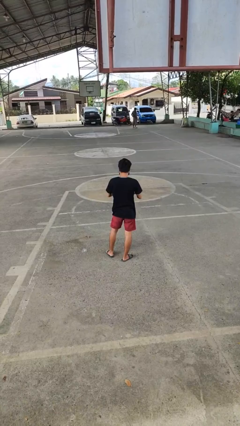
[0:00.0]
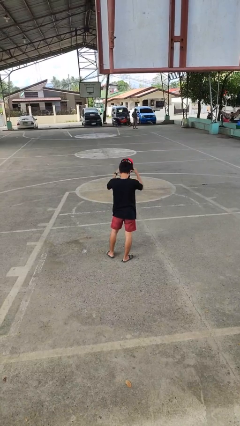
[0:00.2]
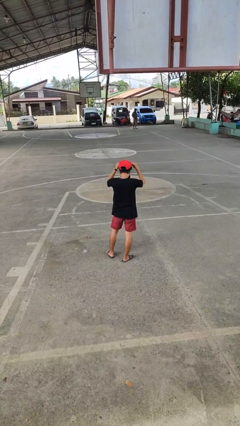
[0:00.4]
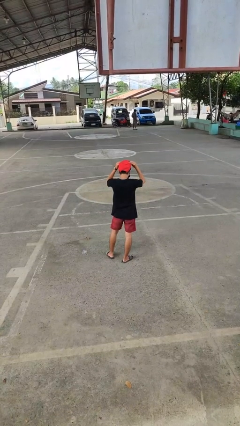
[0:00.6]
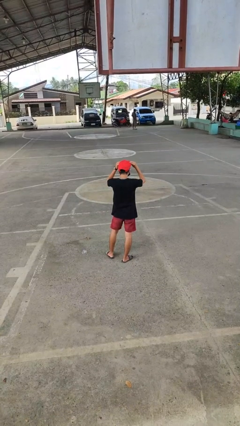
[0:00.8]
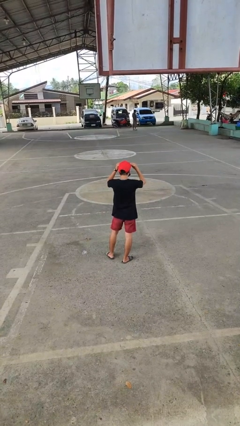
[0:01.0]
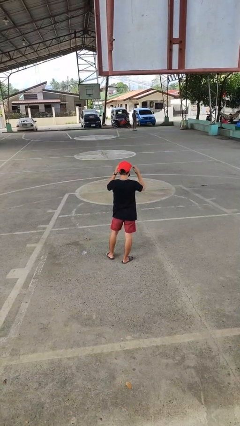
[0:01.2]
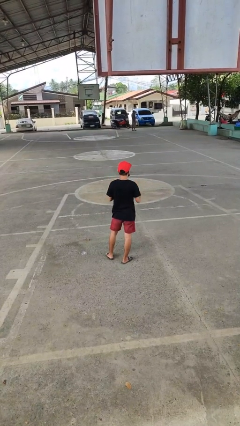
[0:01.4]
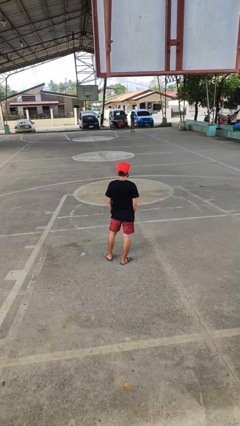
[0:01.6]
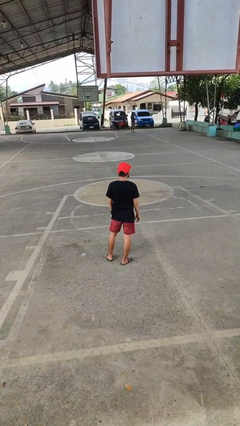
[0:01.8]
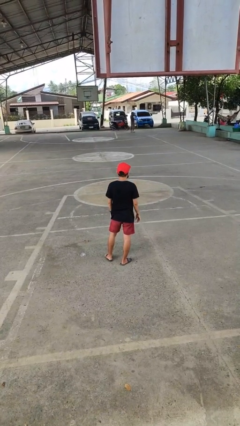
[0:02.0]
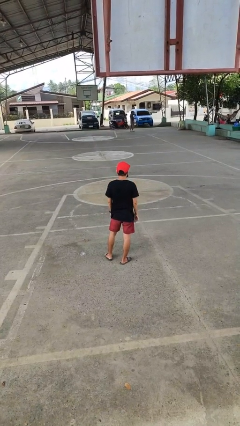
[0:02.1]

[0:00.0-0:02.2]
person puts on hat

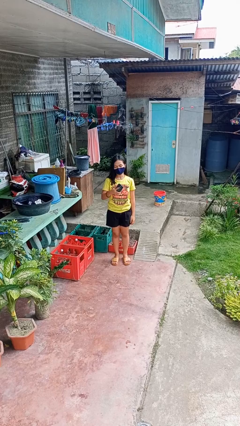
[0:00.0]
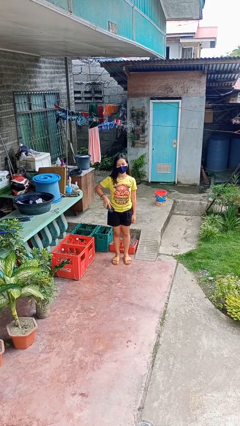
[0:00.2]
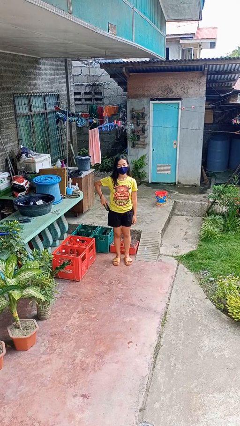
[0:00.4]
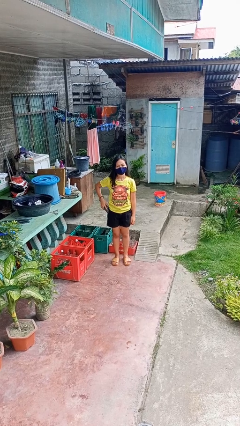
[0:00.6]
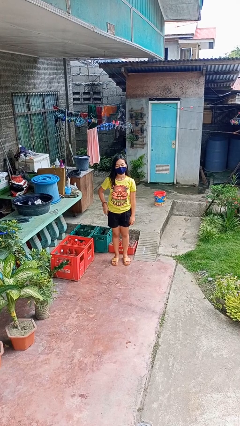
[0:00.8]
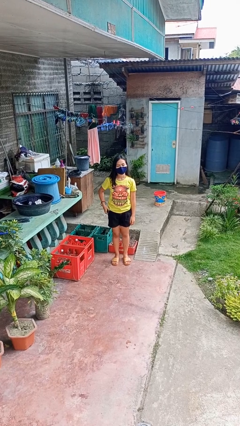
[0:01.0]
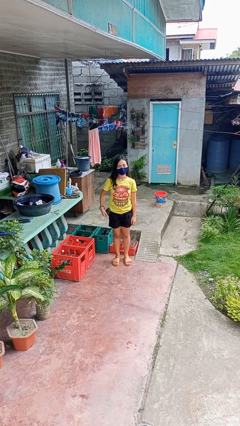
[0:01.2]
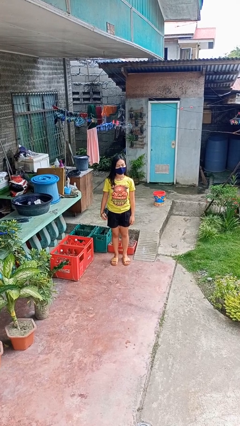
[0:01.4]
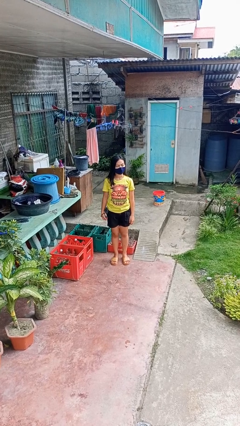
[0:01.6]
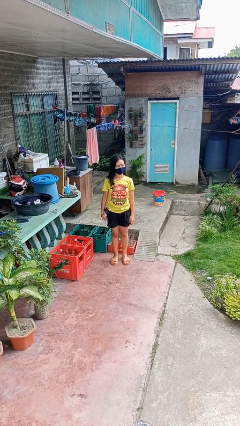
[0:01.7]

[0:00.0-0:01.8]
person puts phone into pocket

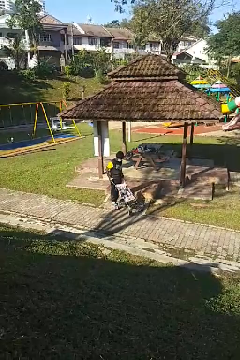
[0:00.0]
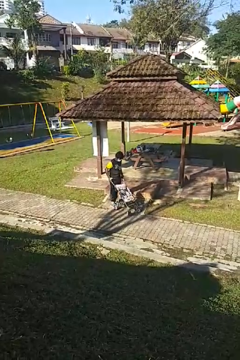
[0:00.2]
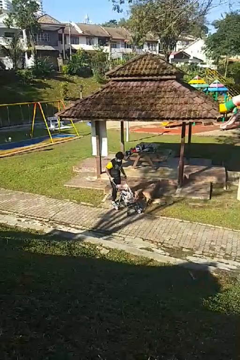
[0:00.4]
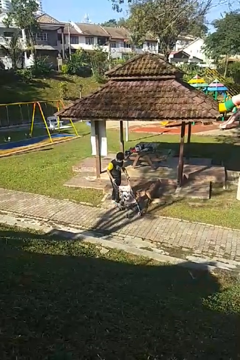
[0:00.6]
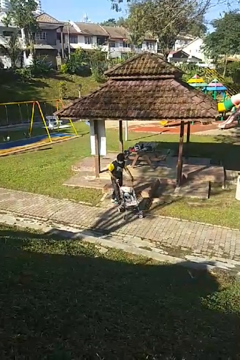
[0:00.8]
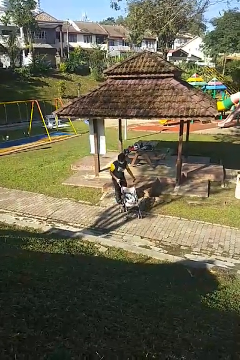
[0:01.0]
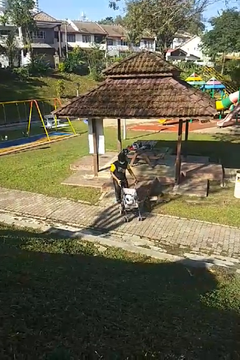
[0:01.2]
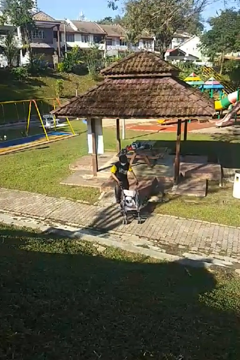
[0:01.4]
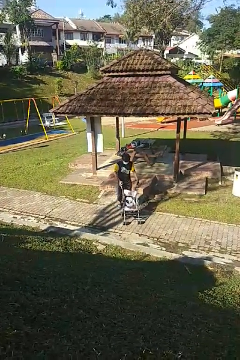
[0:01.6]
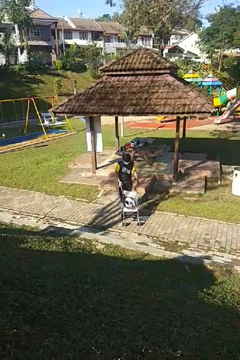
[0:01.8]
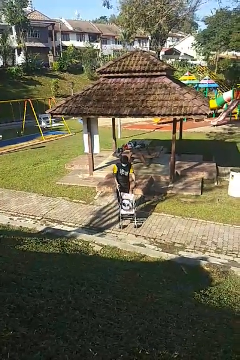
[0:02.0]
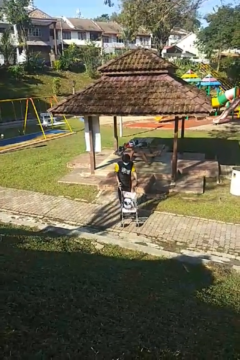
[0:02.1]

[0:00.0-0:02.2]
person pushes wheeled cart

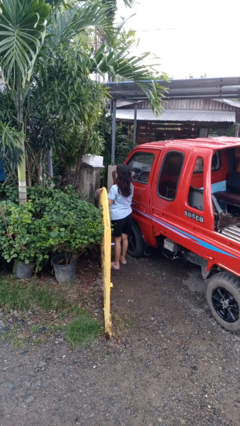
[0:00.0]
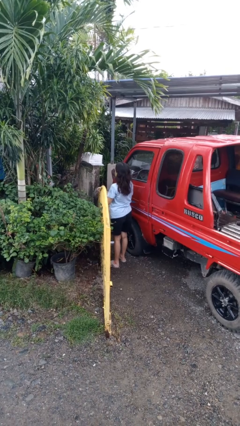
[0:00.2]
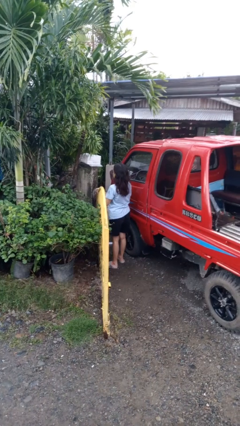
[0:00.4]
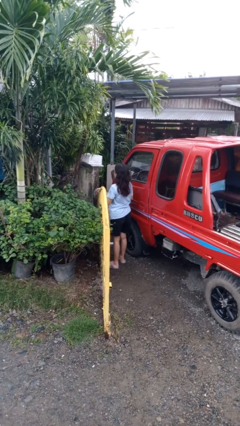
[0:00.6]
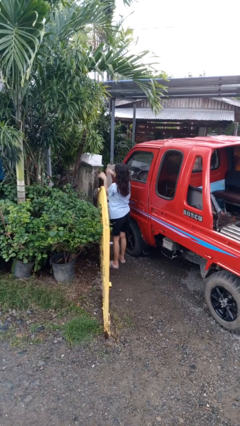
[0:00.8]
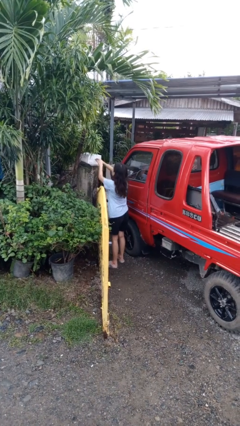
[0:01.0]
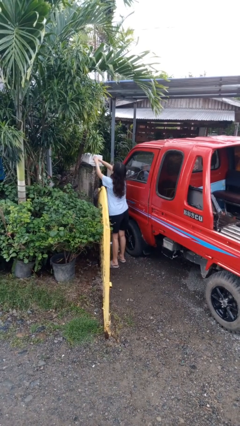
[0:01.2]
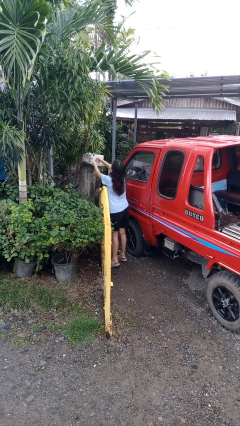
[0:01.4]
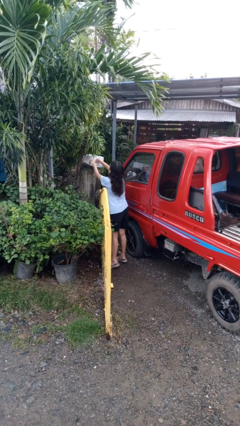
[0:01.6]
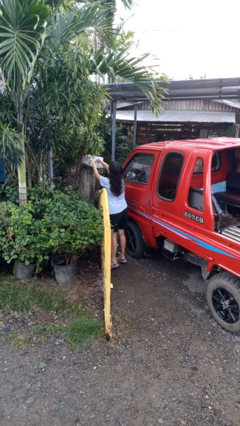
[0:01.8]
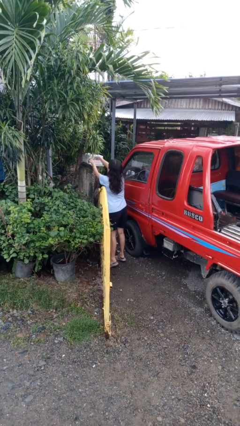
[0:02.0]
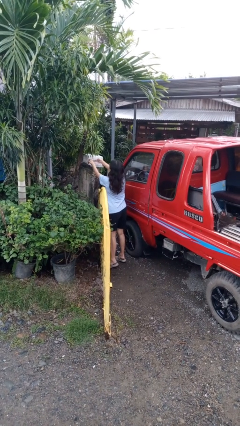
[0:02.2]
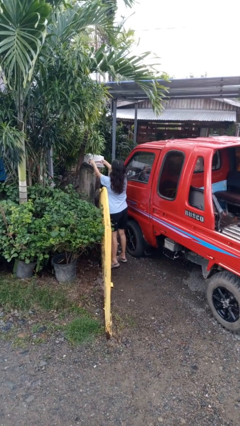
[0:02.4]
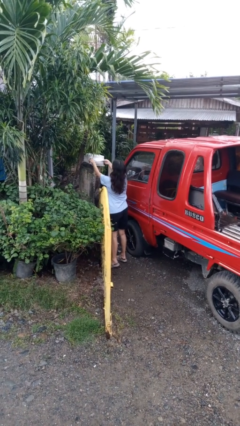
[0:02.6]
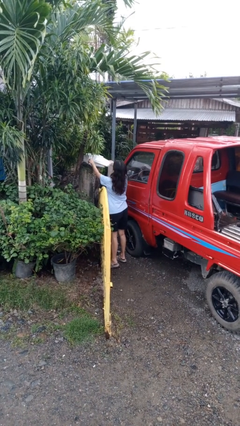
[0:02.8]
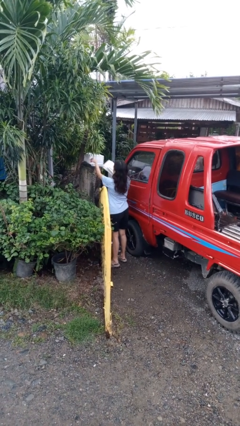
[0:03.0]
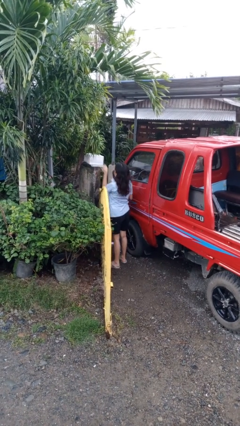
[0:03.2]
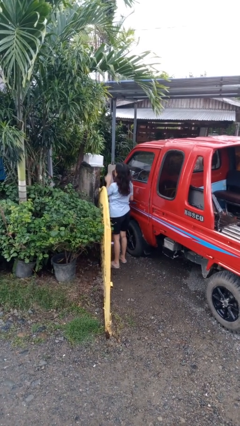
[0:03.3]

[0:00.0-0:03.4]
person takes letters from mailbox

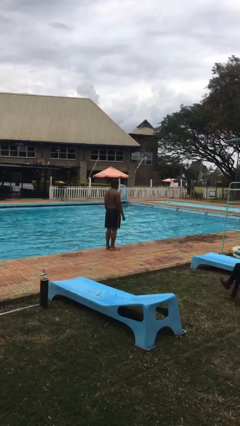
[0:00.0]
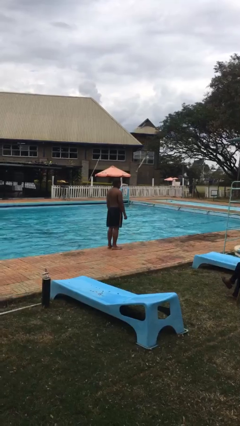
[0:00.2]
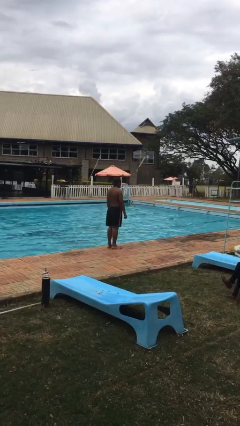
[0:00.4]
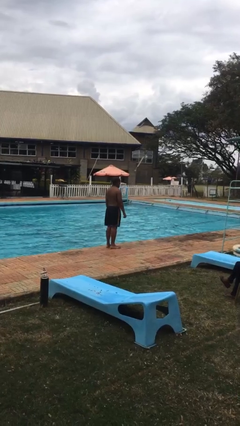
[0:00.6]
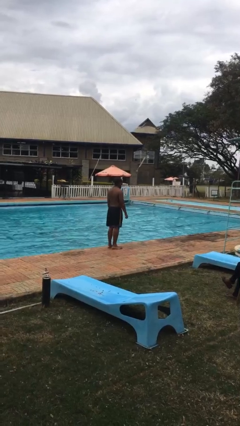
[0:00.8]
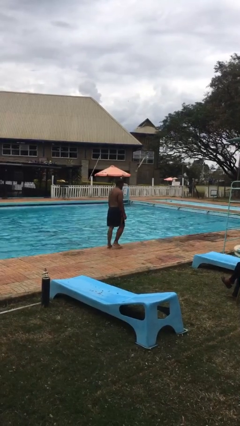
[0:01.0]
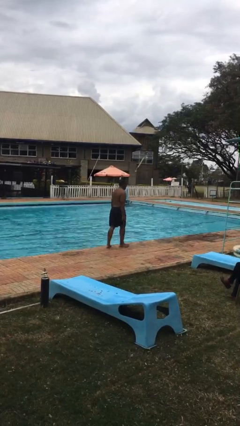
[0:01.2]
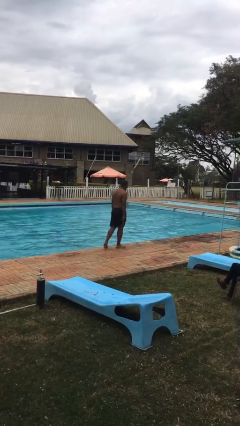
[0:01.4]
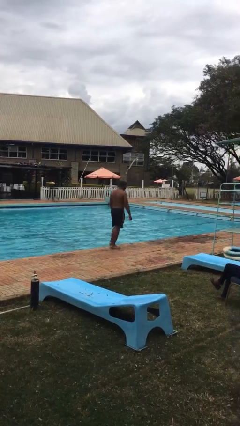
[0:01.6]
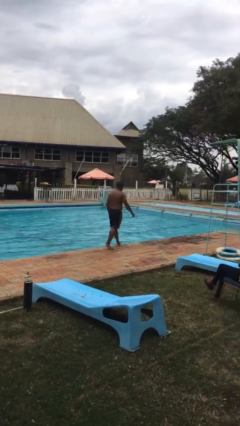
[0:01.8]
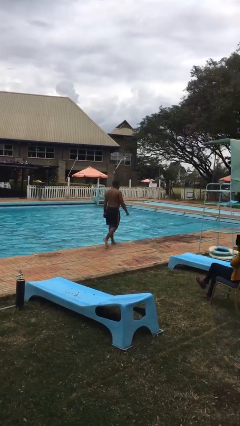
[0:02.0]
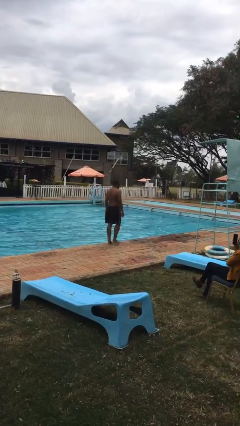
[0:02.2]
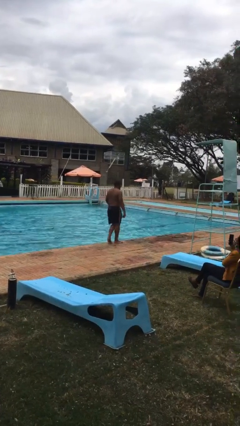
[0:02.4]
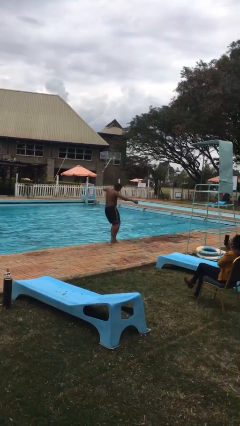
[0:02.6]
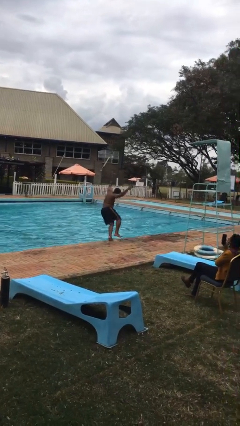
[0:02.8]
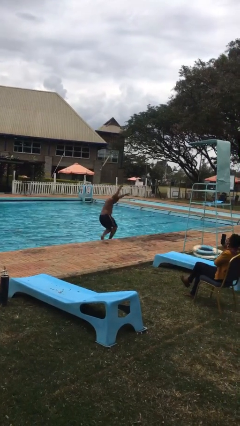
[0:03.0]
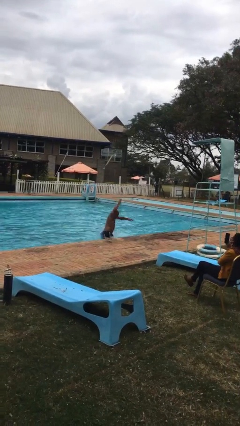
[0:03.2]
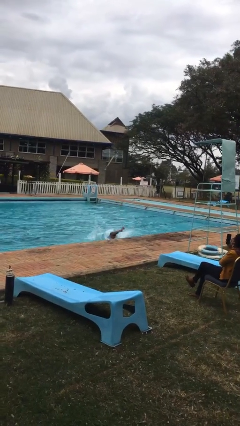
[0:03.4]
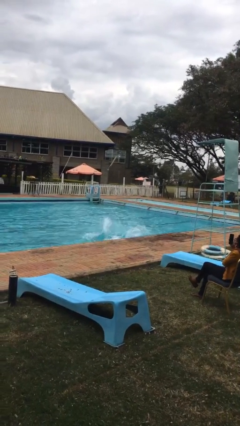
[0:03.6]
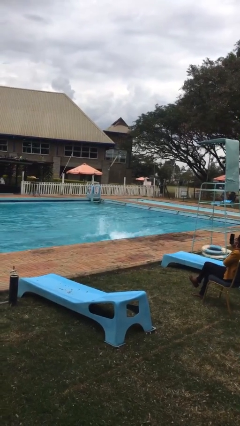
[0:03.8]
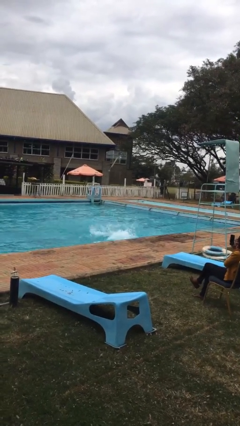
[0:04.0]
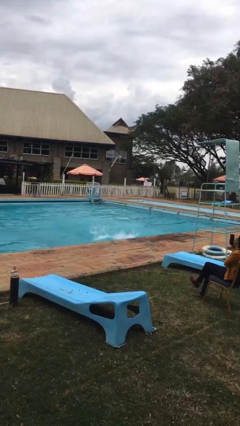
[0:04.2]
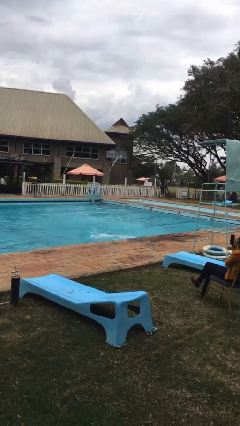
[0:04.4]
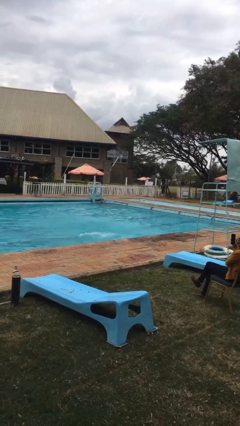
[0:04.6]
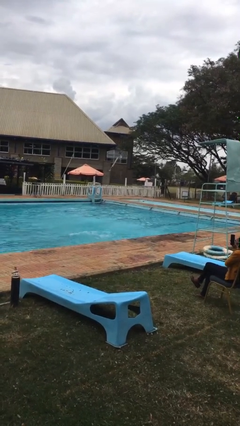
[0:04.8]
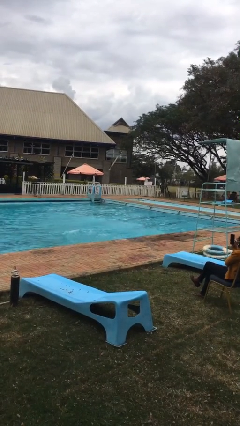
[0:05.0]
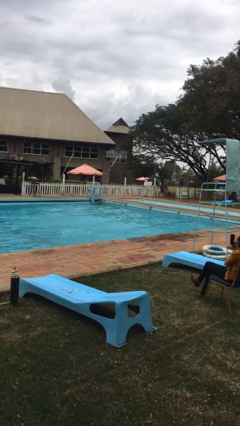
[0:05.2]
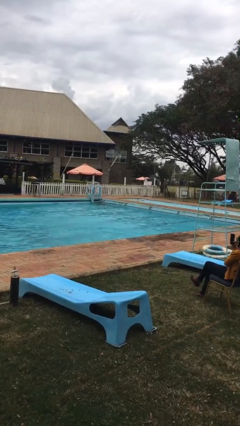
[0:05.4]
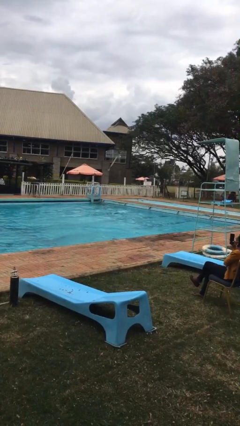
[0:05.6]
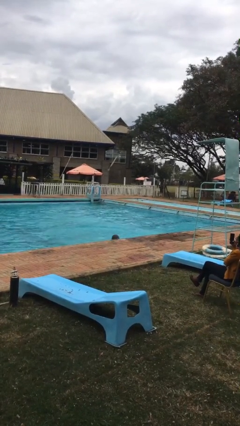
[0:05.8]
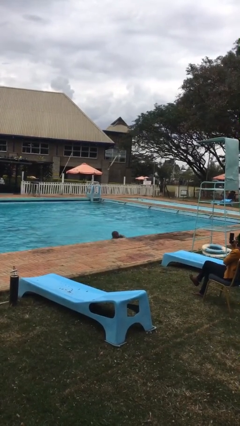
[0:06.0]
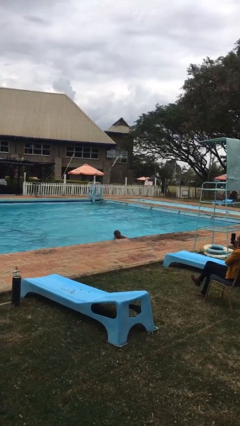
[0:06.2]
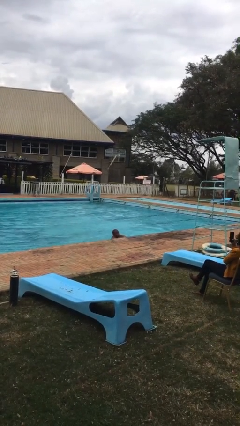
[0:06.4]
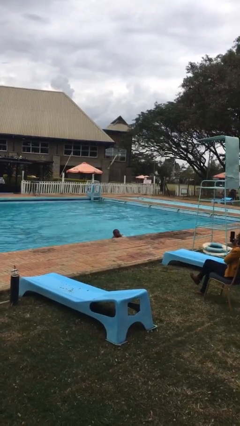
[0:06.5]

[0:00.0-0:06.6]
person falls into pool

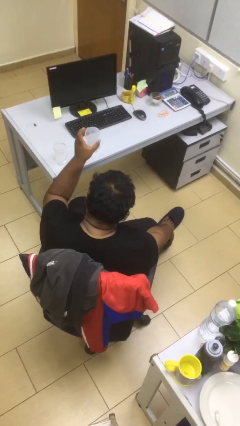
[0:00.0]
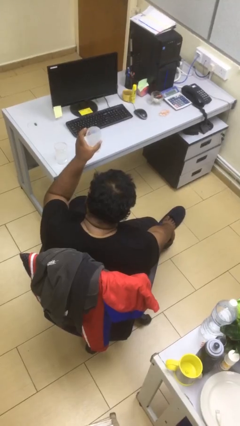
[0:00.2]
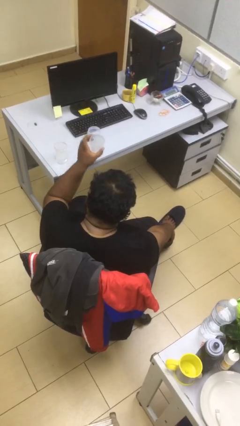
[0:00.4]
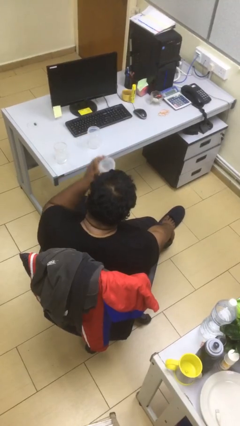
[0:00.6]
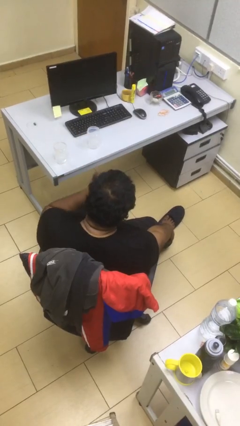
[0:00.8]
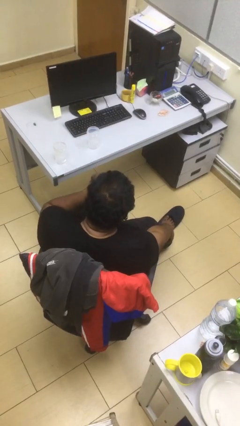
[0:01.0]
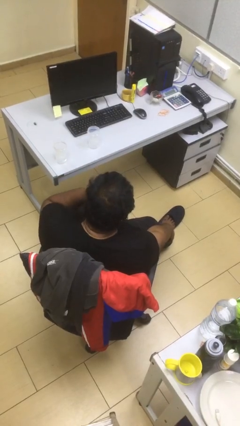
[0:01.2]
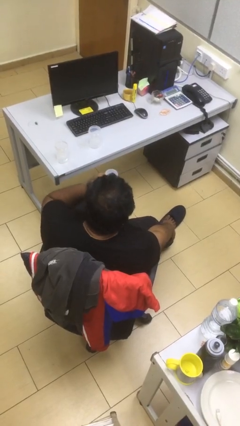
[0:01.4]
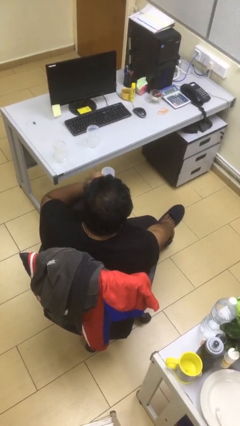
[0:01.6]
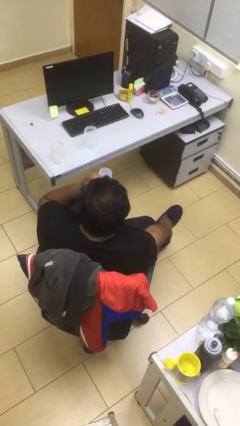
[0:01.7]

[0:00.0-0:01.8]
person drinks from shotglass
